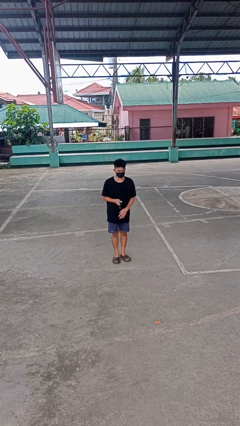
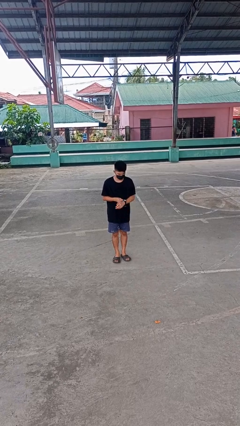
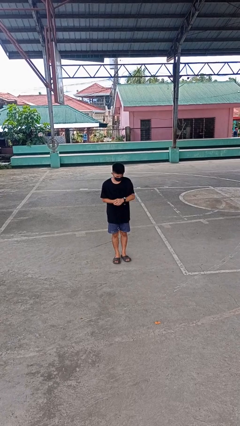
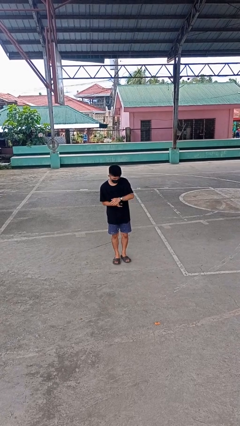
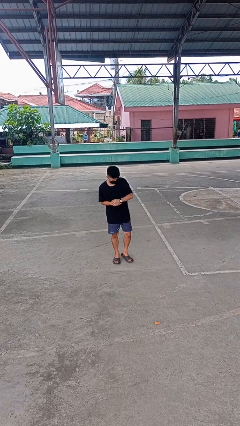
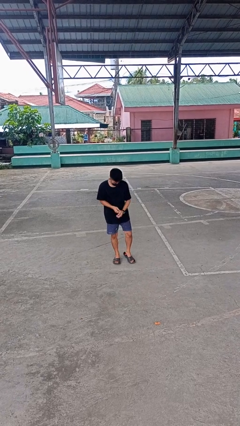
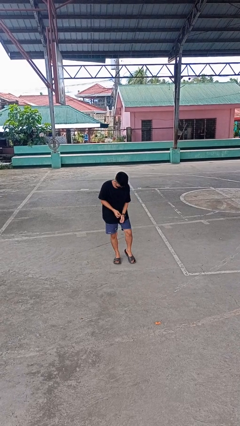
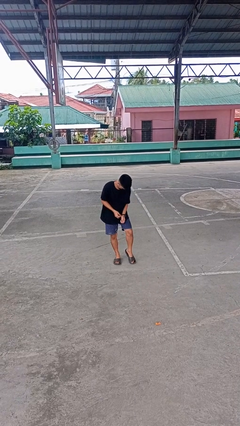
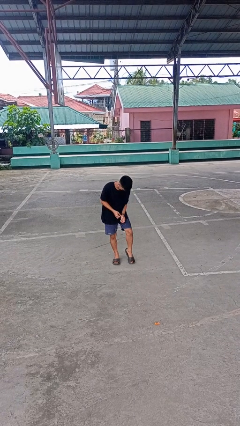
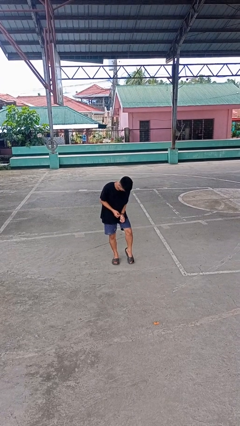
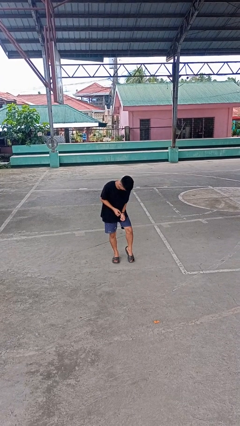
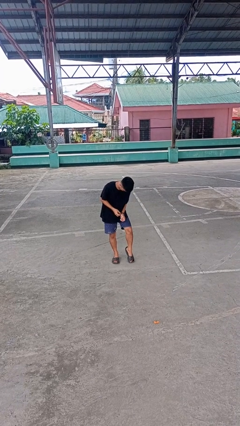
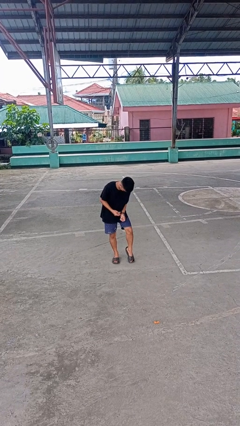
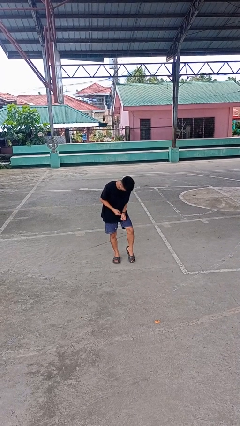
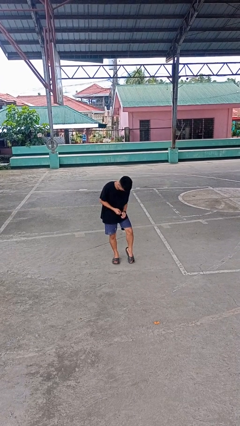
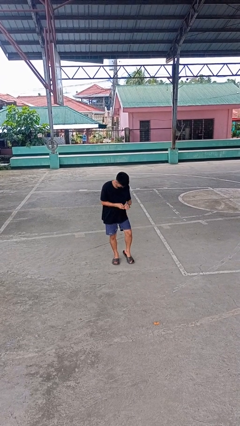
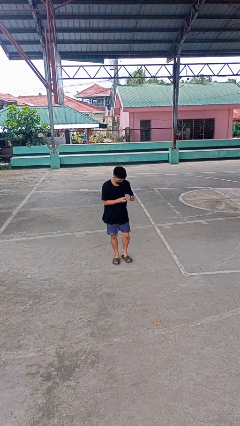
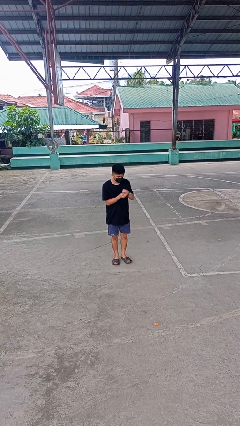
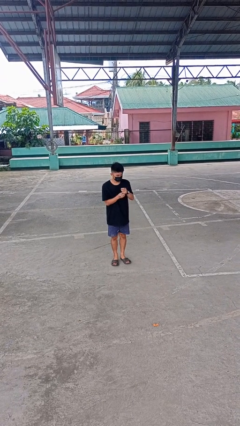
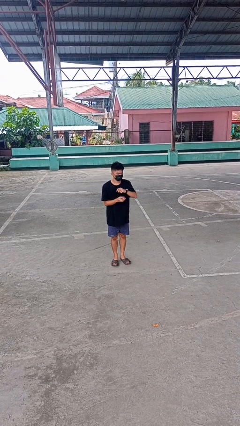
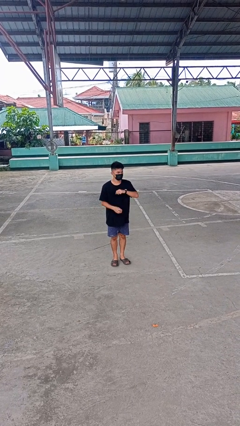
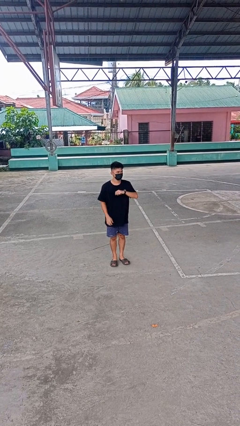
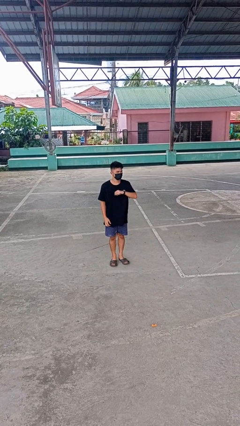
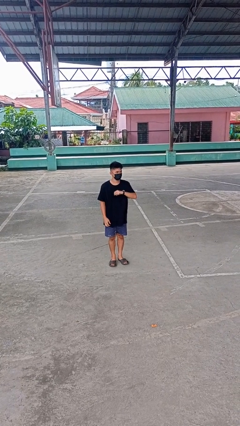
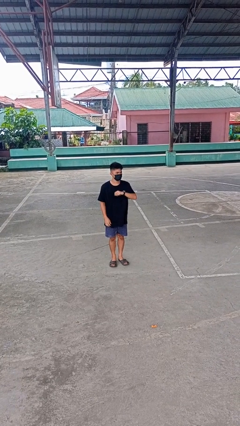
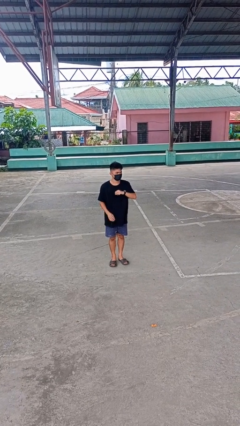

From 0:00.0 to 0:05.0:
person puts on wristwatch

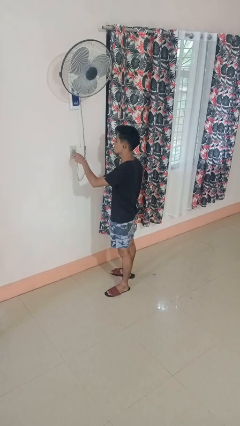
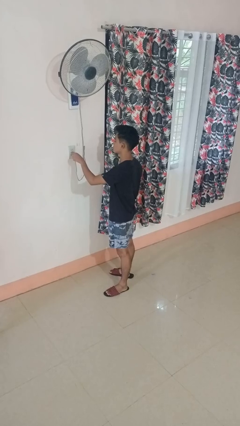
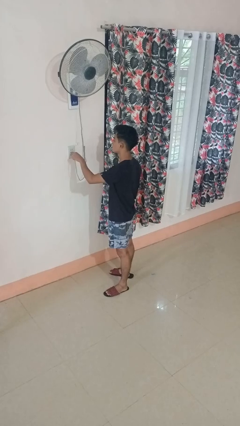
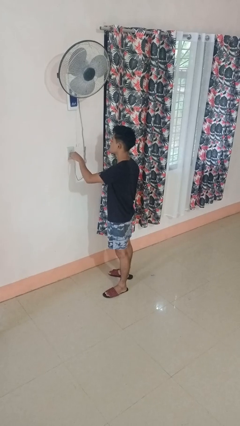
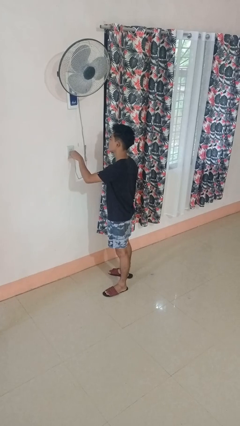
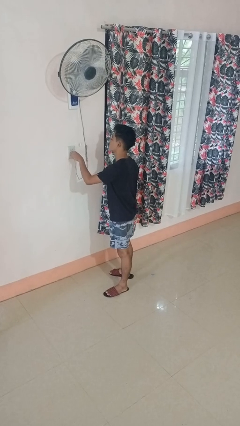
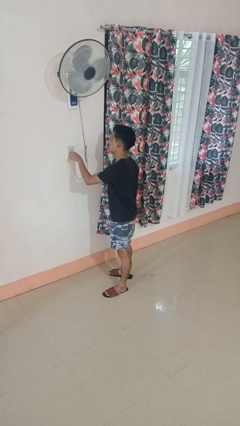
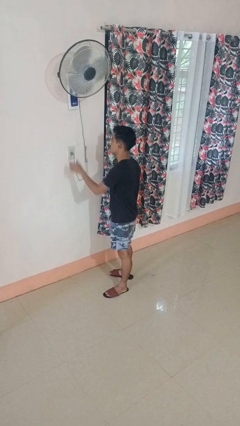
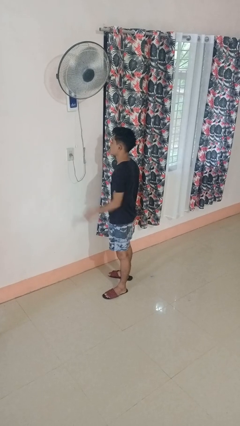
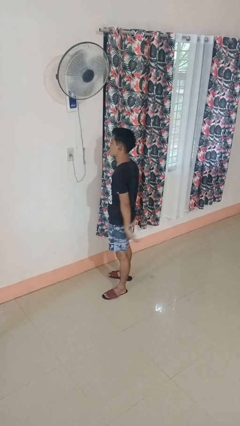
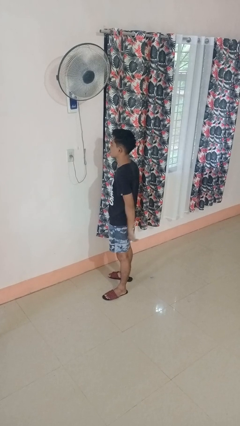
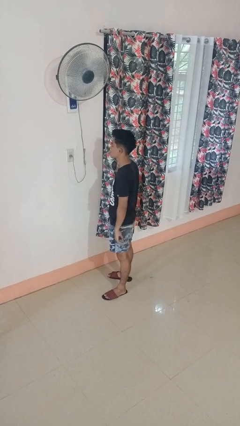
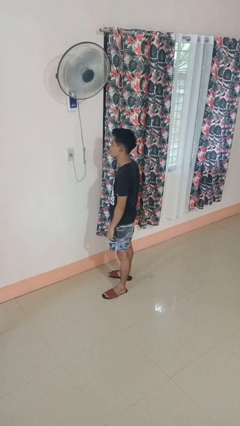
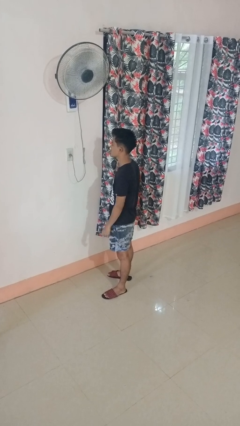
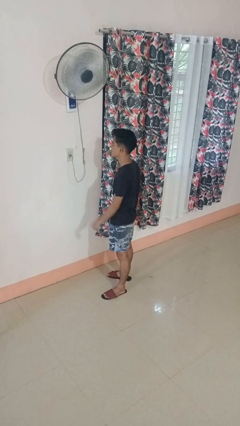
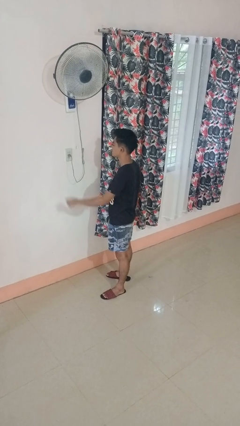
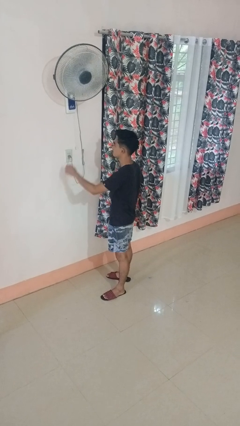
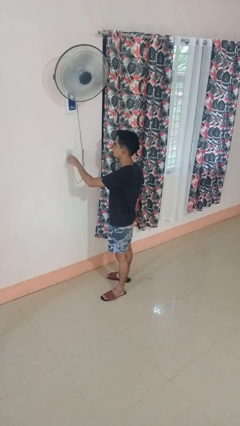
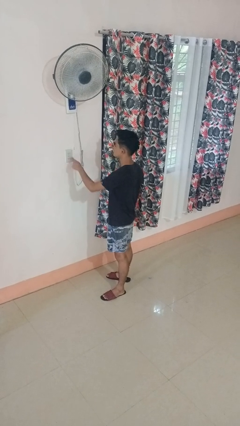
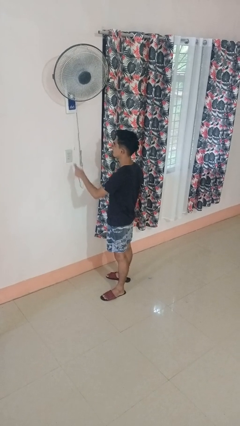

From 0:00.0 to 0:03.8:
person plugs into electrical socket

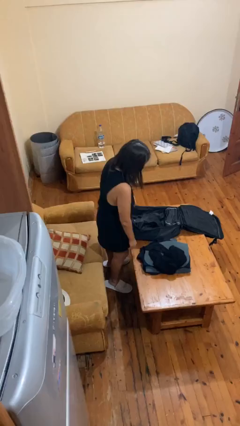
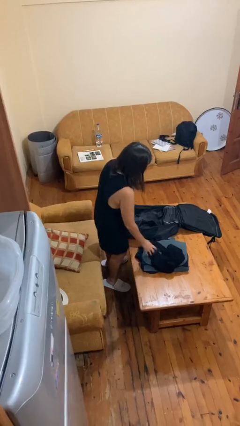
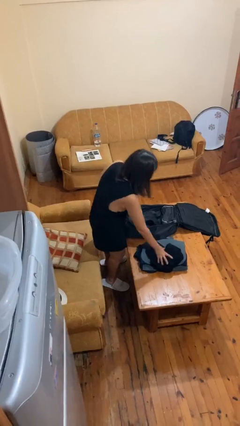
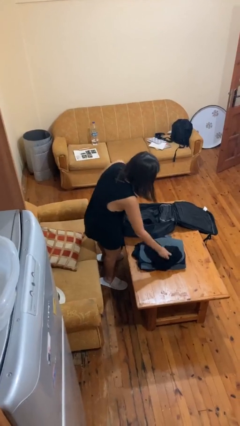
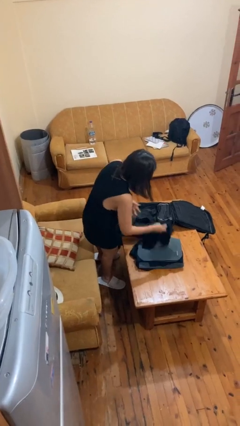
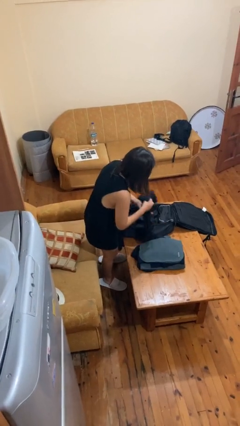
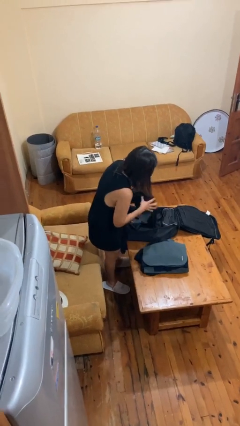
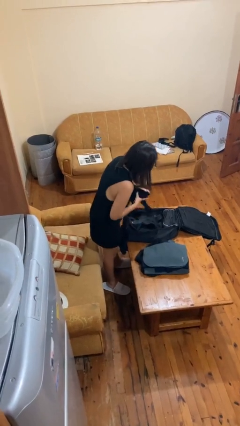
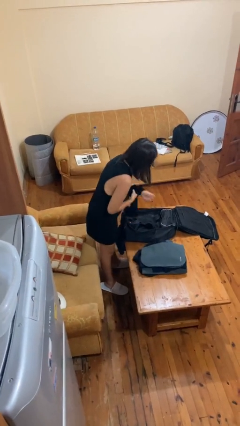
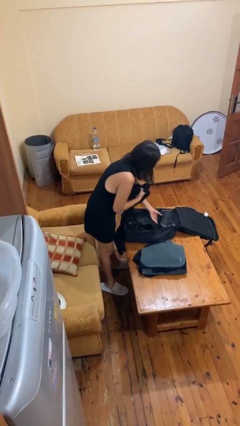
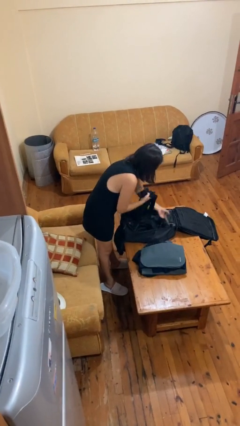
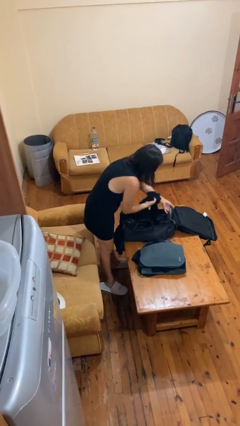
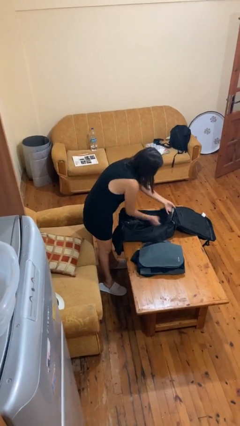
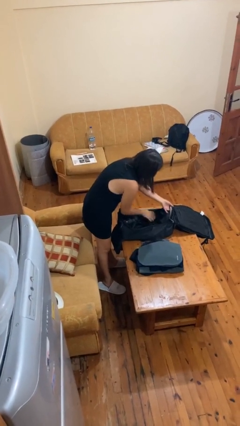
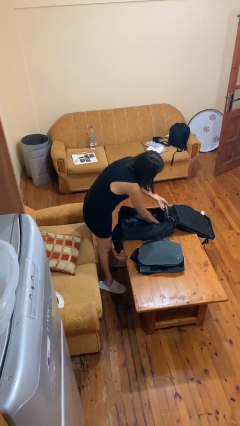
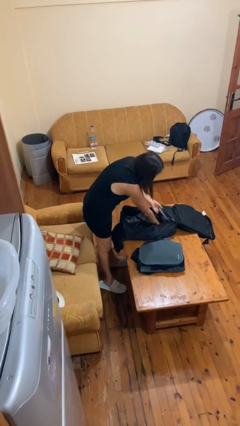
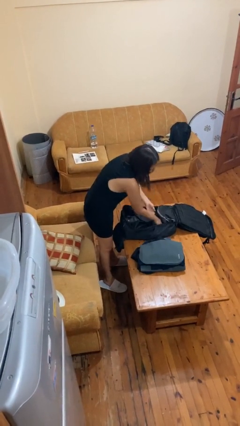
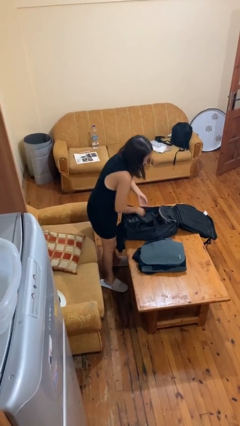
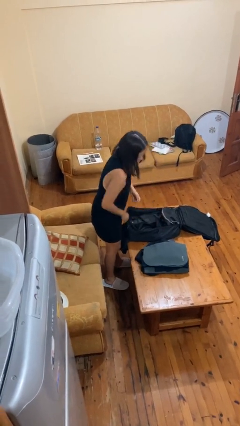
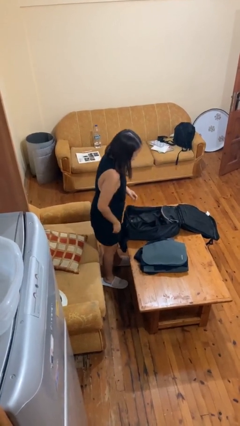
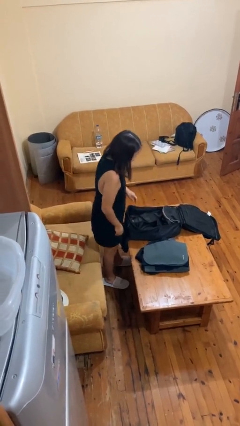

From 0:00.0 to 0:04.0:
person loads clothes into suitcase

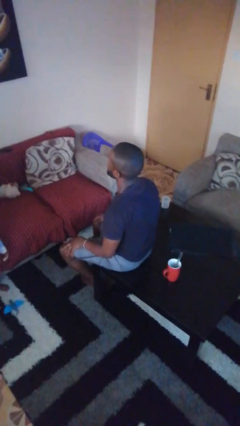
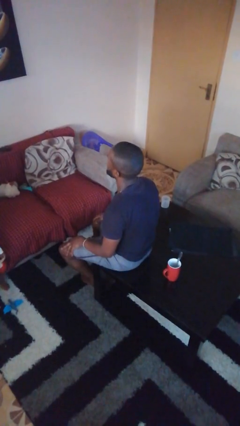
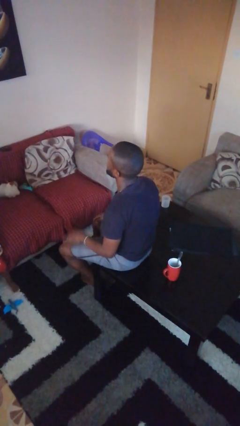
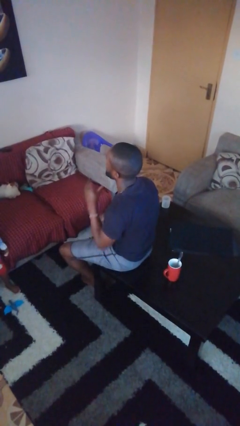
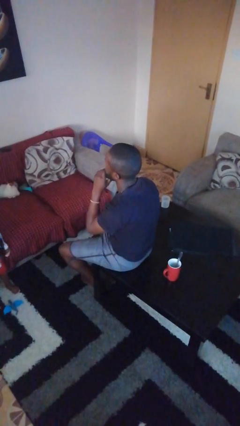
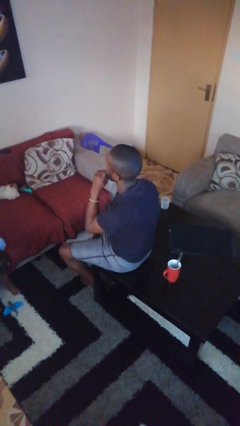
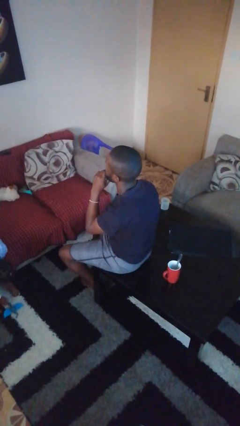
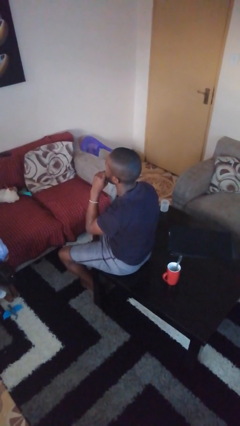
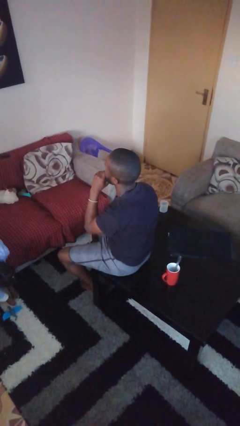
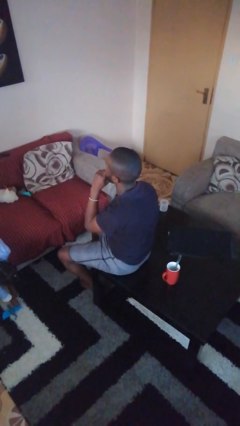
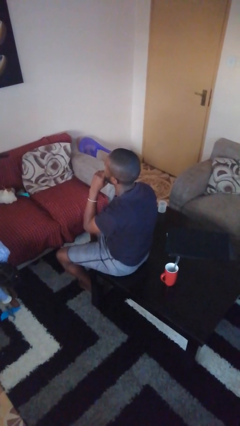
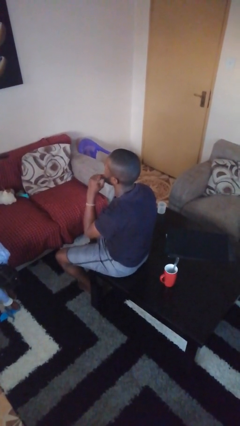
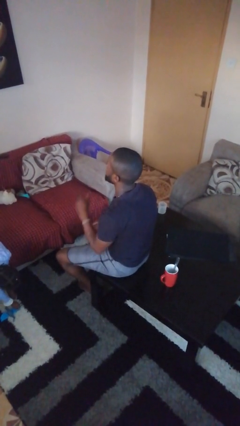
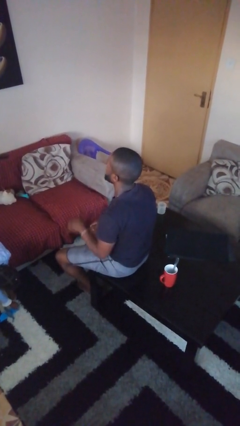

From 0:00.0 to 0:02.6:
person strokes chin

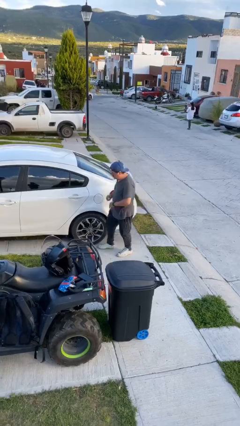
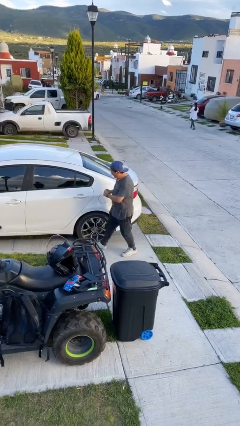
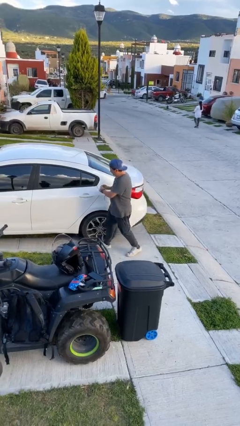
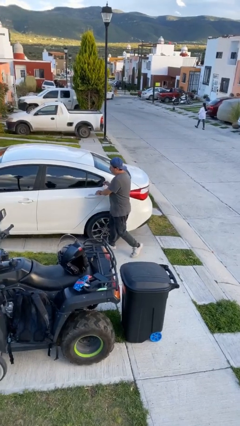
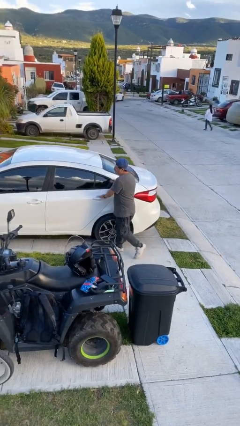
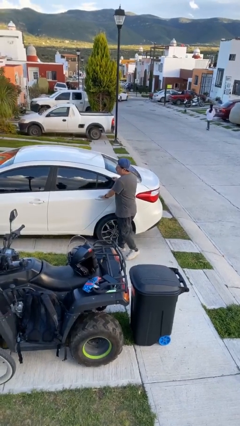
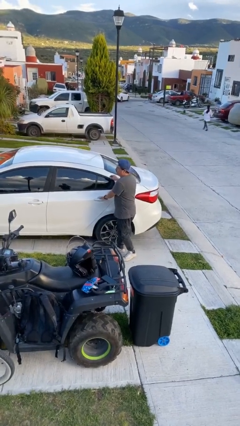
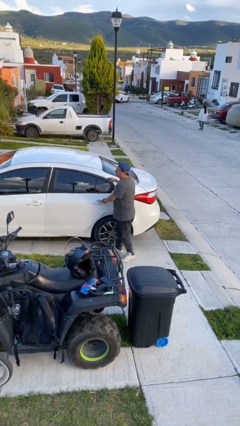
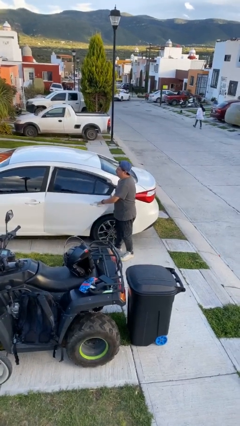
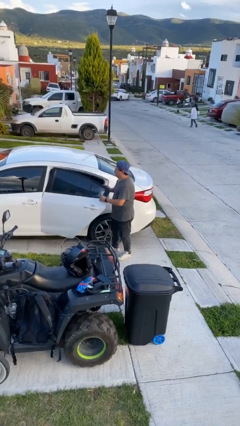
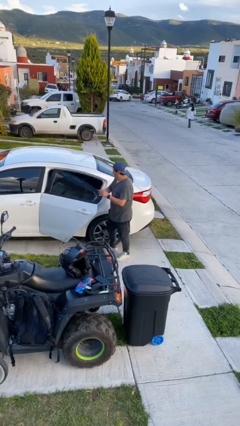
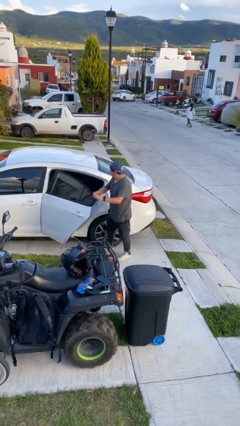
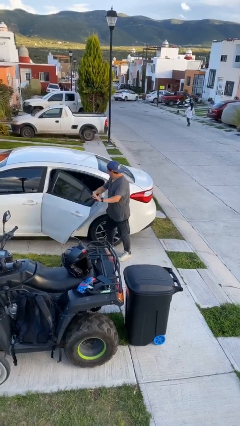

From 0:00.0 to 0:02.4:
person opens car door
